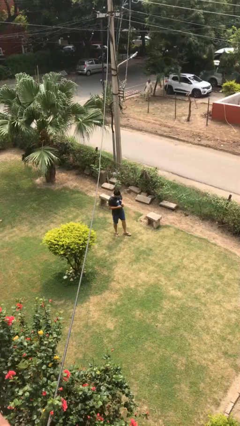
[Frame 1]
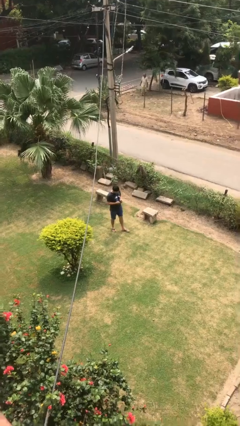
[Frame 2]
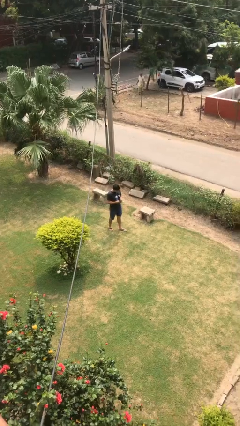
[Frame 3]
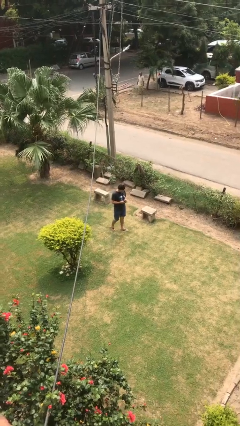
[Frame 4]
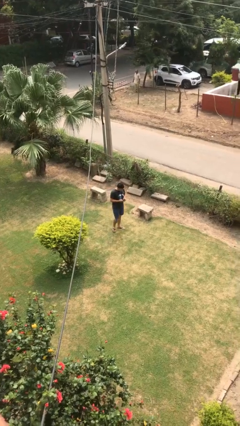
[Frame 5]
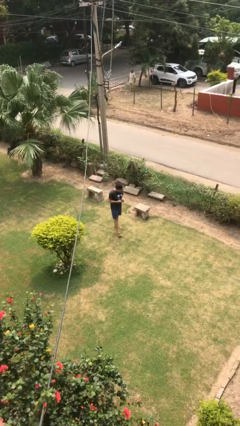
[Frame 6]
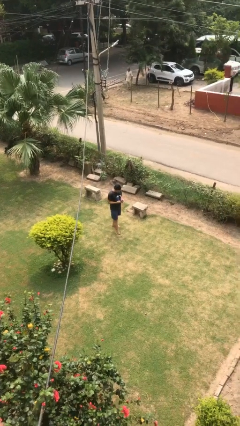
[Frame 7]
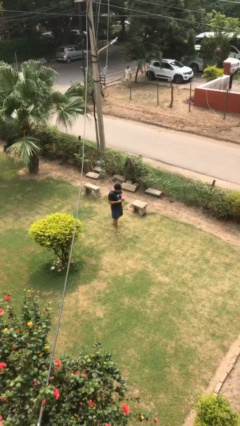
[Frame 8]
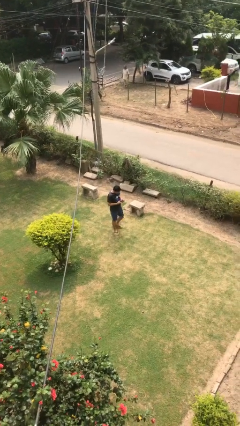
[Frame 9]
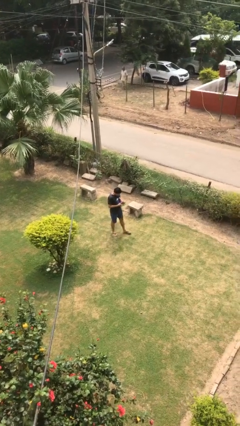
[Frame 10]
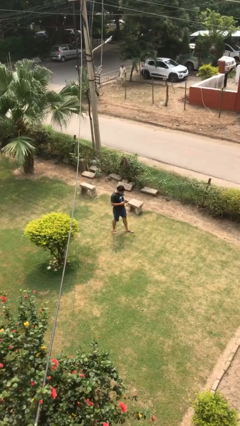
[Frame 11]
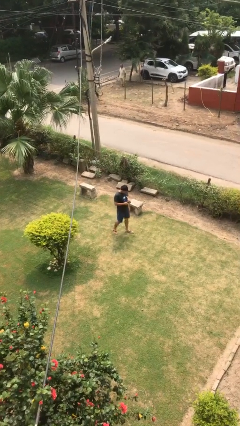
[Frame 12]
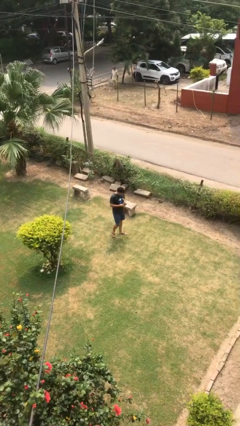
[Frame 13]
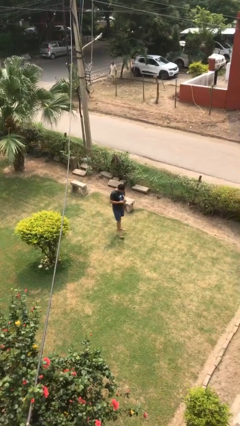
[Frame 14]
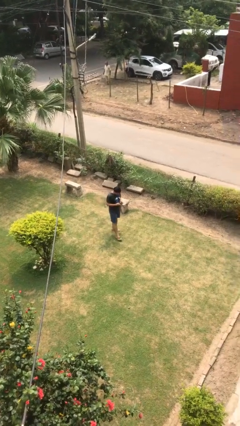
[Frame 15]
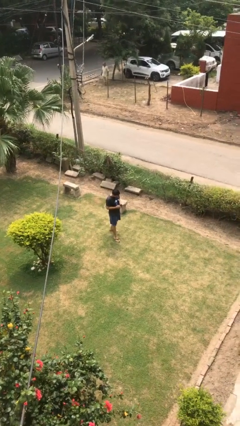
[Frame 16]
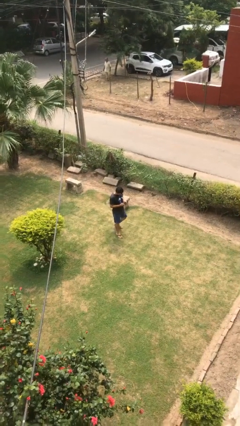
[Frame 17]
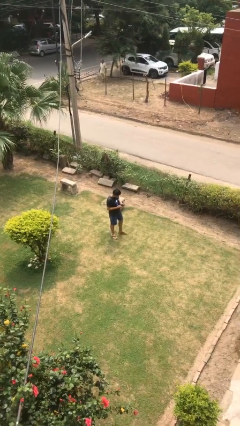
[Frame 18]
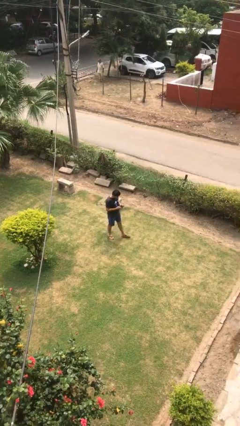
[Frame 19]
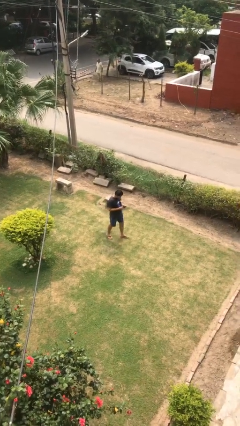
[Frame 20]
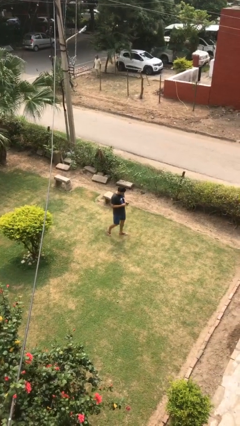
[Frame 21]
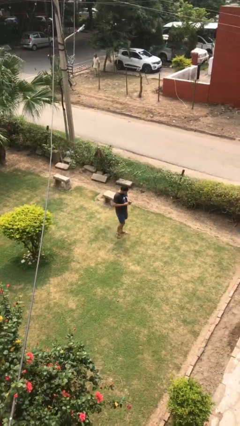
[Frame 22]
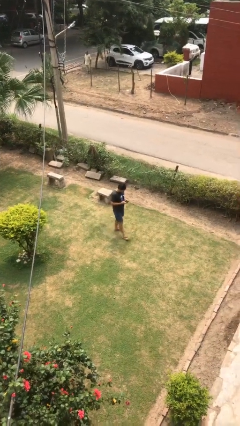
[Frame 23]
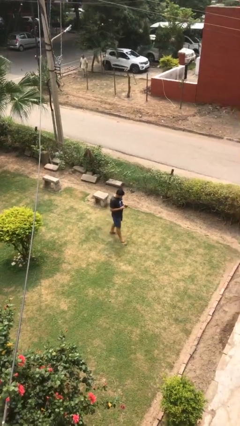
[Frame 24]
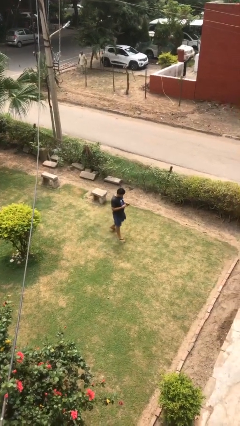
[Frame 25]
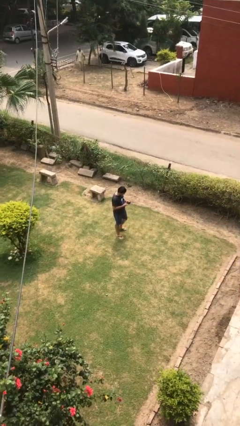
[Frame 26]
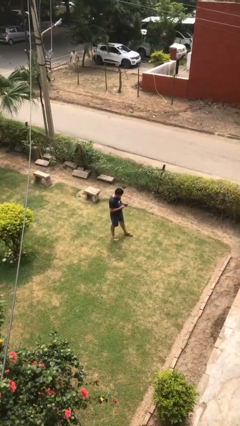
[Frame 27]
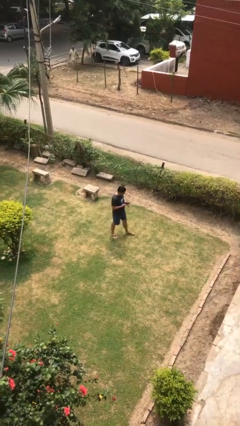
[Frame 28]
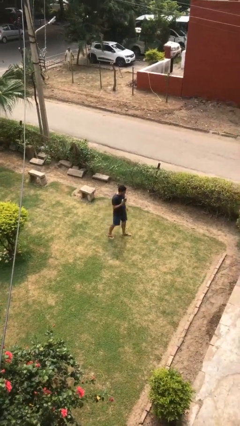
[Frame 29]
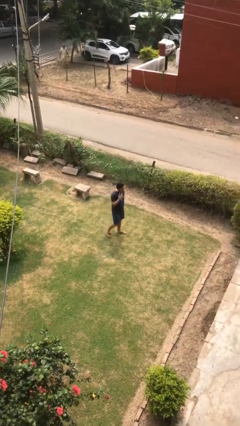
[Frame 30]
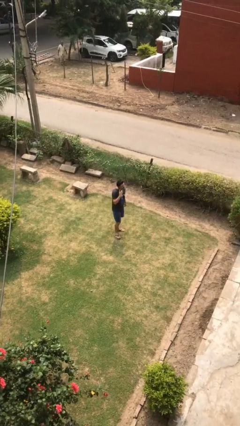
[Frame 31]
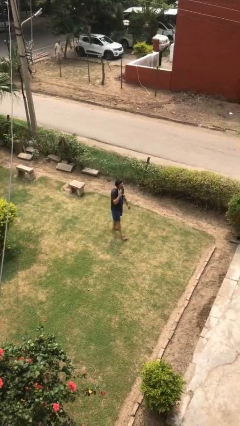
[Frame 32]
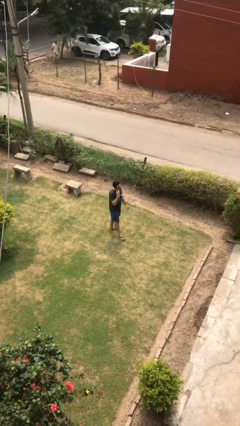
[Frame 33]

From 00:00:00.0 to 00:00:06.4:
person texts on phone

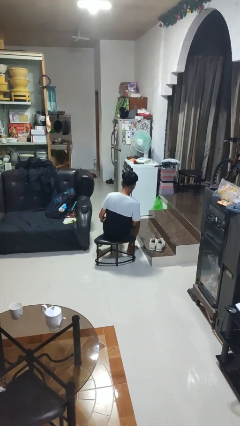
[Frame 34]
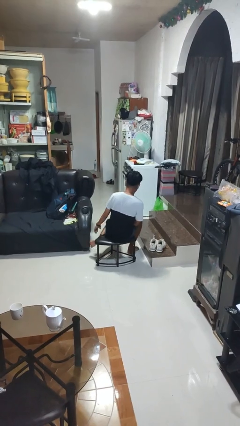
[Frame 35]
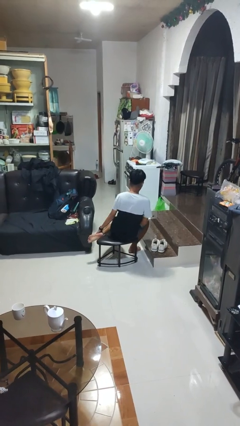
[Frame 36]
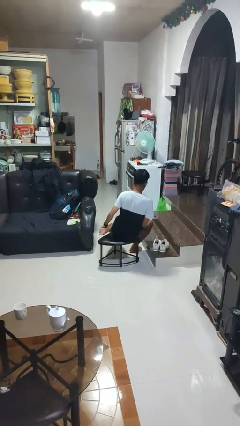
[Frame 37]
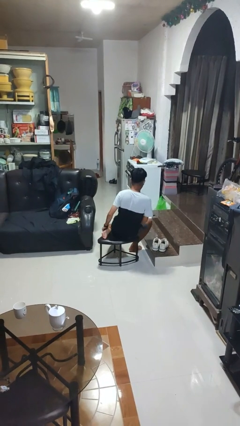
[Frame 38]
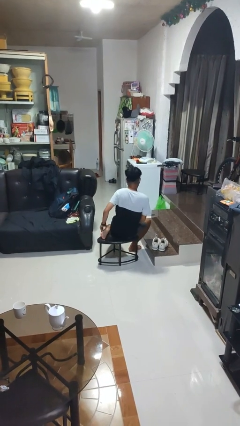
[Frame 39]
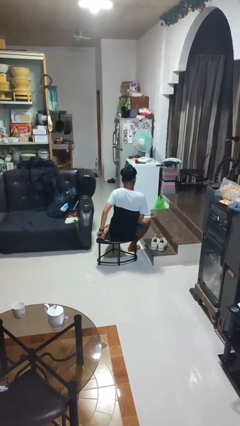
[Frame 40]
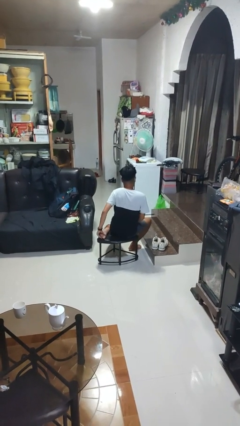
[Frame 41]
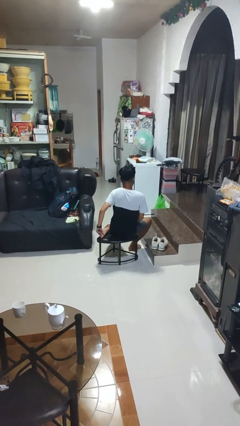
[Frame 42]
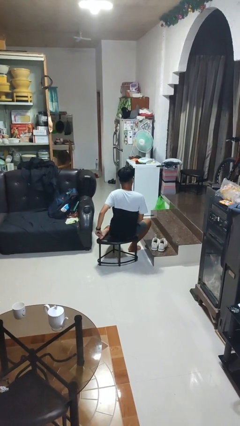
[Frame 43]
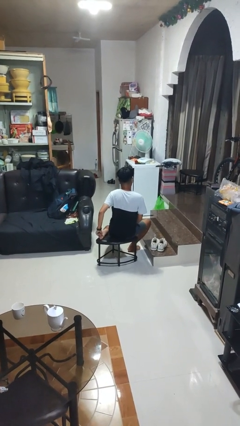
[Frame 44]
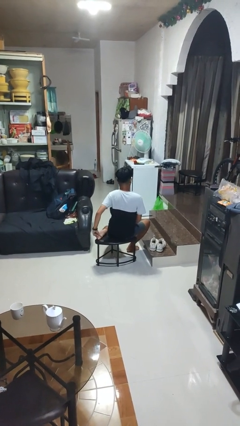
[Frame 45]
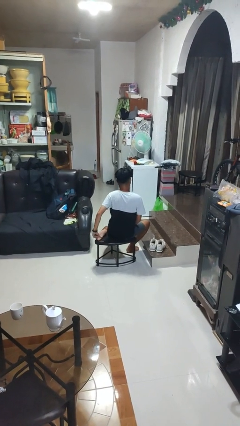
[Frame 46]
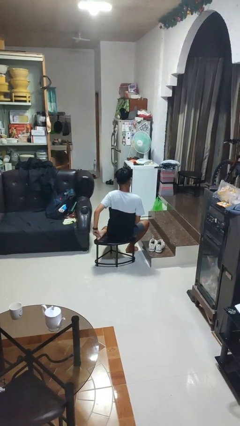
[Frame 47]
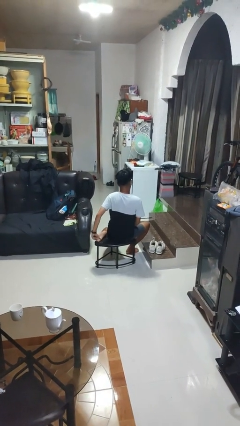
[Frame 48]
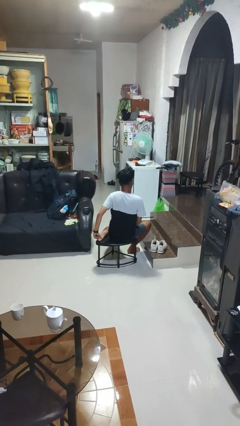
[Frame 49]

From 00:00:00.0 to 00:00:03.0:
person rubs foot

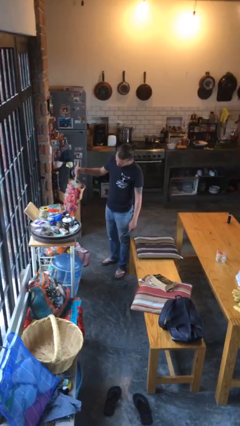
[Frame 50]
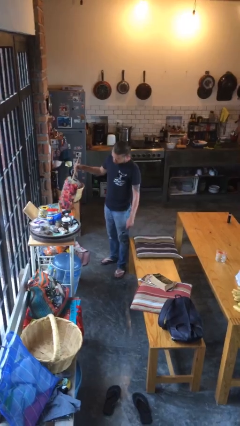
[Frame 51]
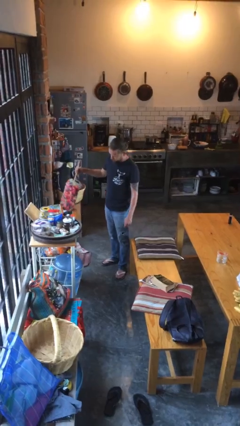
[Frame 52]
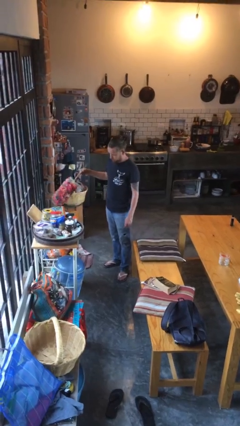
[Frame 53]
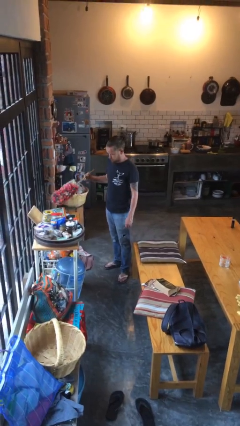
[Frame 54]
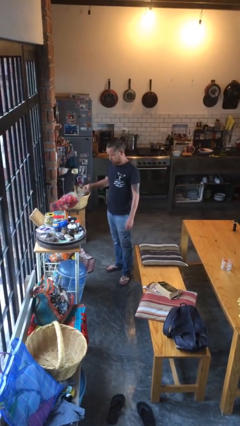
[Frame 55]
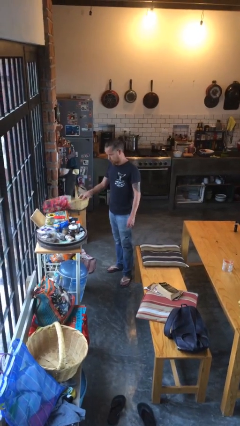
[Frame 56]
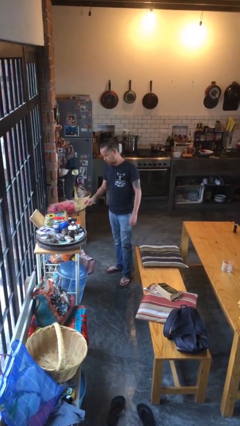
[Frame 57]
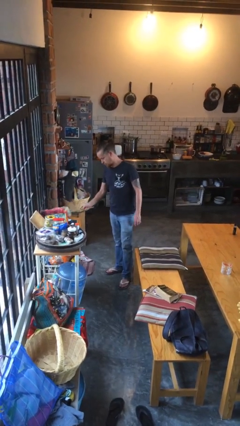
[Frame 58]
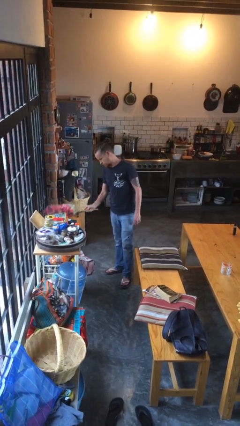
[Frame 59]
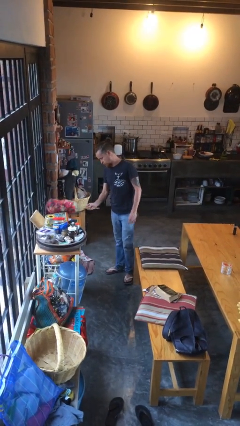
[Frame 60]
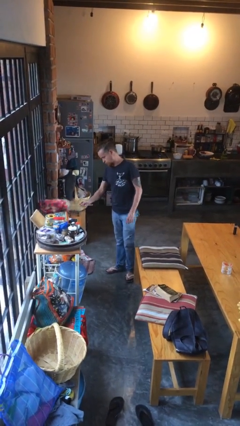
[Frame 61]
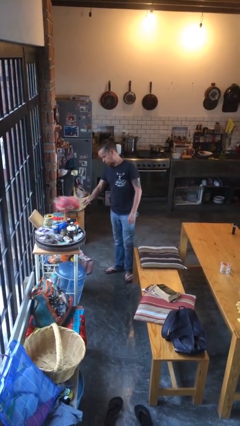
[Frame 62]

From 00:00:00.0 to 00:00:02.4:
person dusts furniture

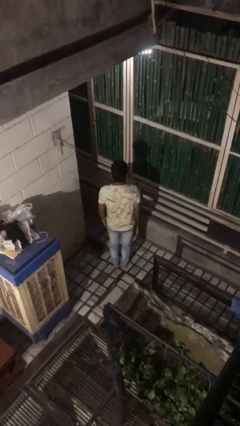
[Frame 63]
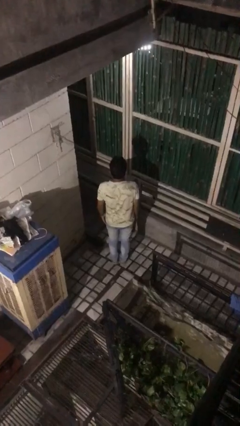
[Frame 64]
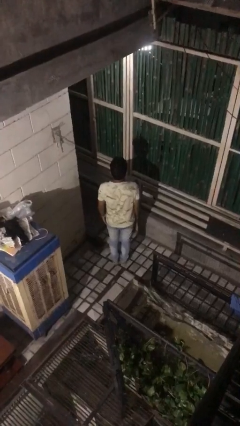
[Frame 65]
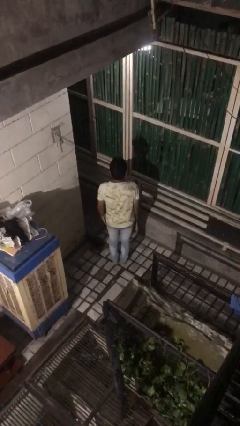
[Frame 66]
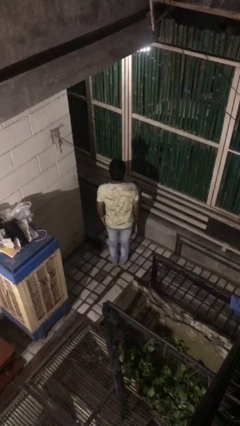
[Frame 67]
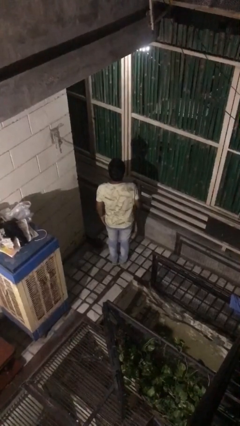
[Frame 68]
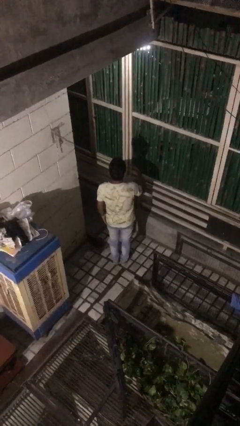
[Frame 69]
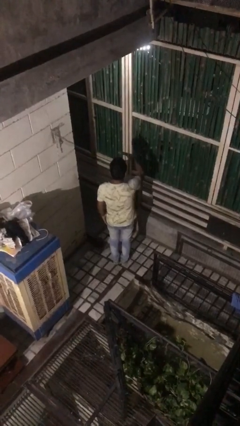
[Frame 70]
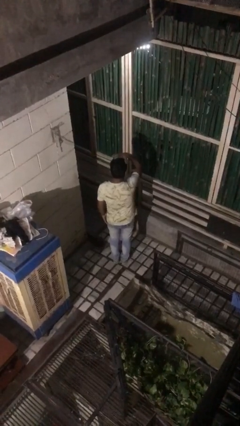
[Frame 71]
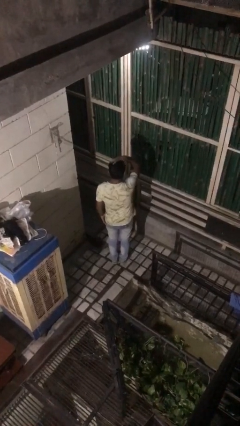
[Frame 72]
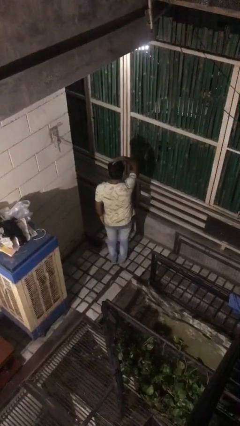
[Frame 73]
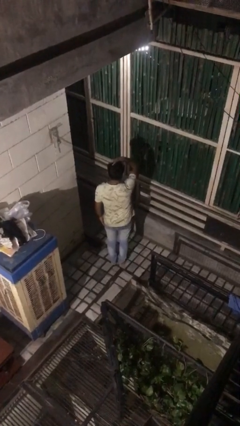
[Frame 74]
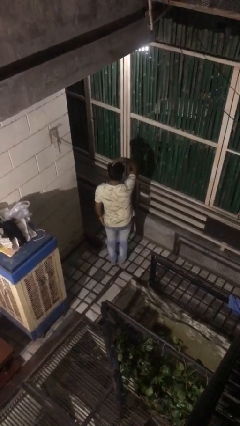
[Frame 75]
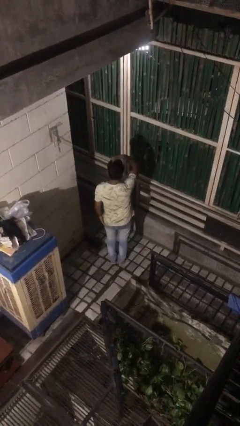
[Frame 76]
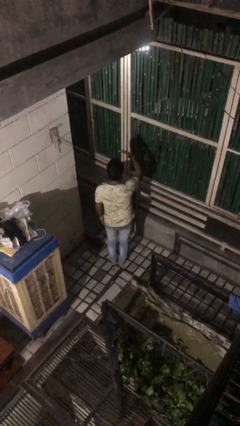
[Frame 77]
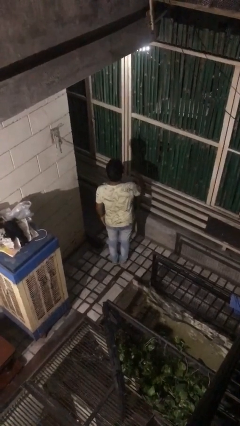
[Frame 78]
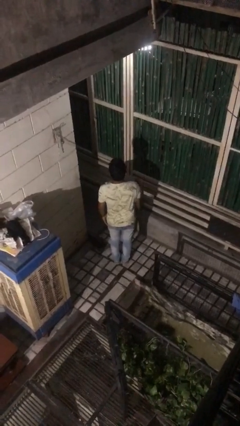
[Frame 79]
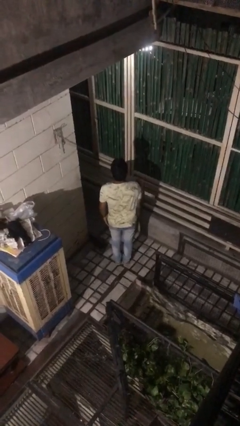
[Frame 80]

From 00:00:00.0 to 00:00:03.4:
person pats head

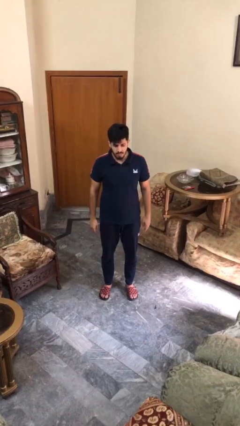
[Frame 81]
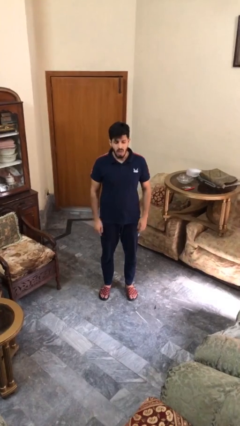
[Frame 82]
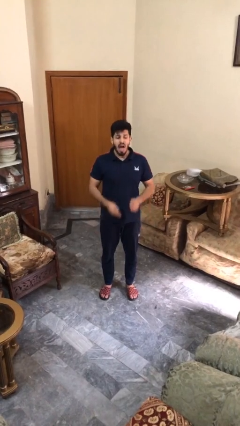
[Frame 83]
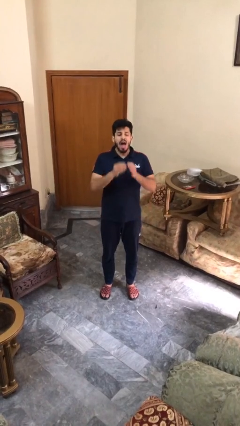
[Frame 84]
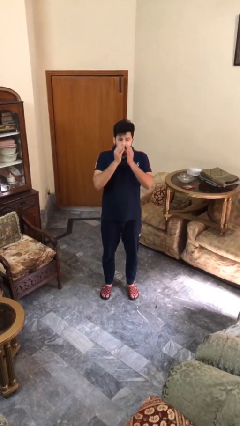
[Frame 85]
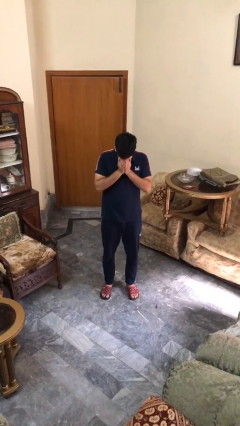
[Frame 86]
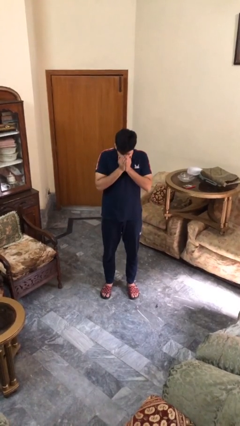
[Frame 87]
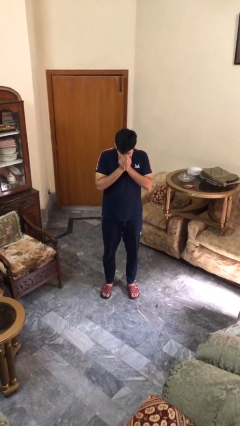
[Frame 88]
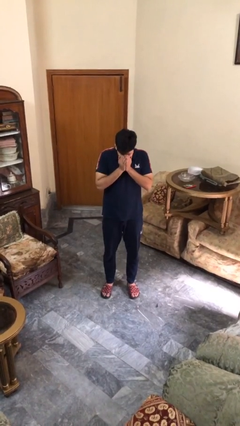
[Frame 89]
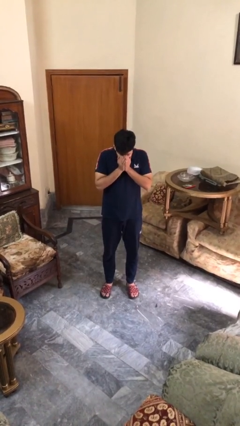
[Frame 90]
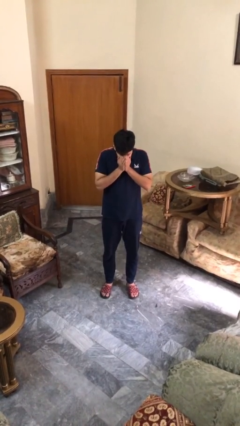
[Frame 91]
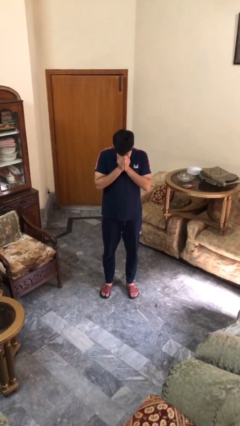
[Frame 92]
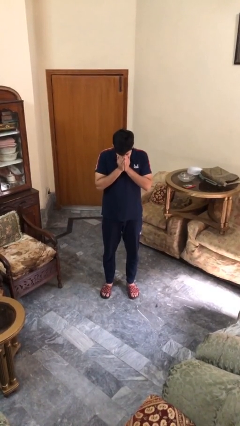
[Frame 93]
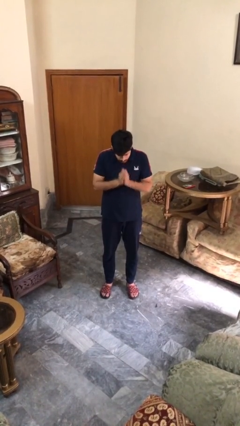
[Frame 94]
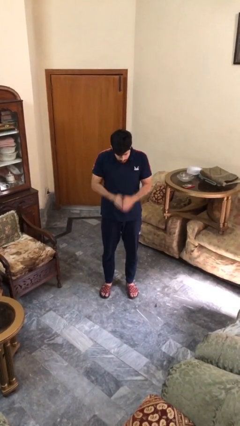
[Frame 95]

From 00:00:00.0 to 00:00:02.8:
person sneezes into hand
